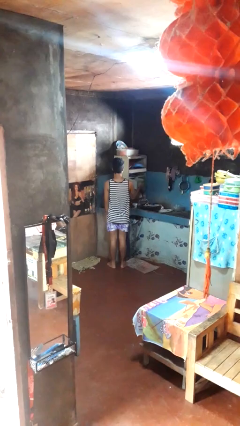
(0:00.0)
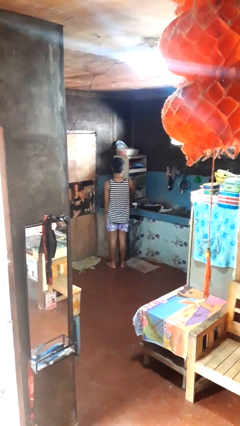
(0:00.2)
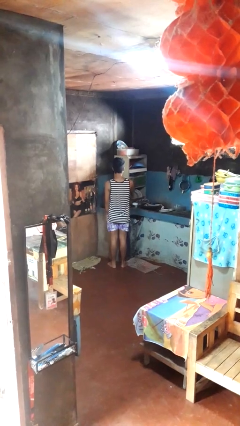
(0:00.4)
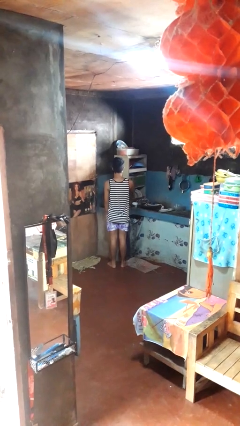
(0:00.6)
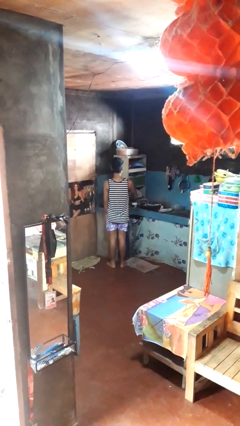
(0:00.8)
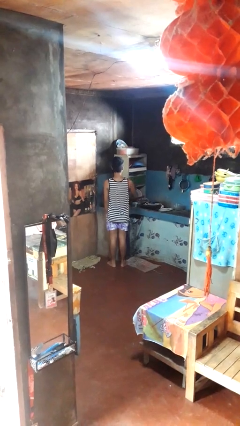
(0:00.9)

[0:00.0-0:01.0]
person closes kitchen drawer

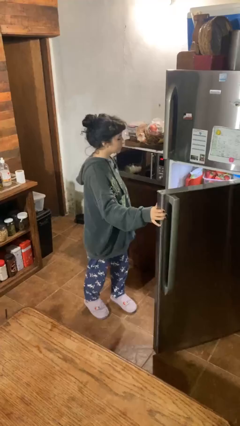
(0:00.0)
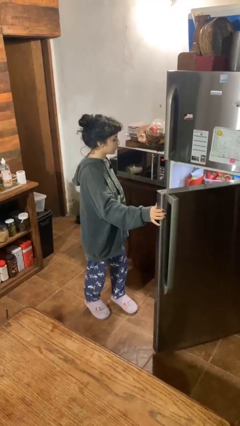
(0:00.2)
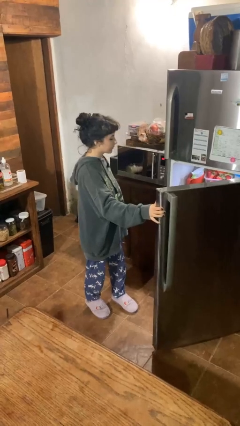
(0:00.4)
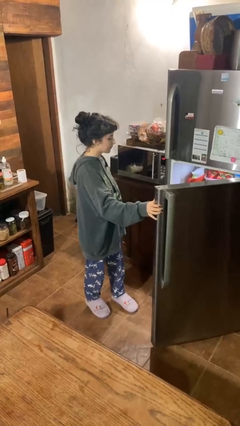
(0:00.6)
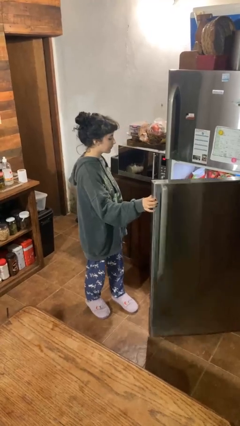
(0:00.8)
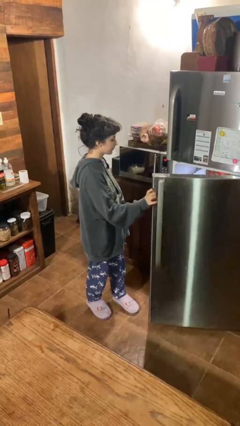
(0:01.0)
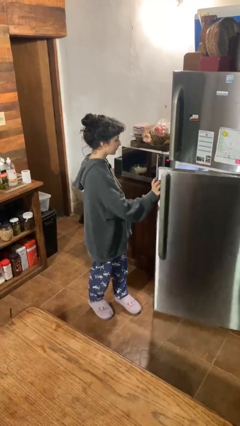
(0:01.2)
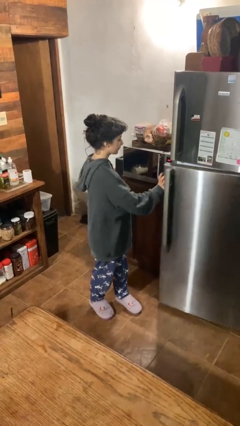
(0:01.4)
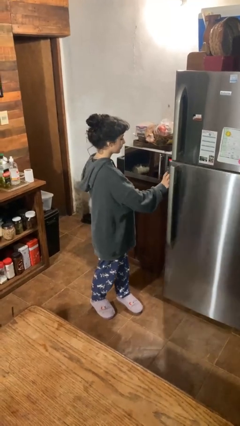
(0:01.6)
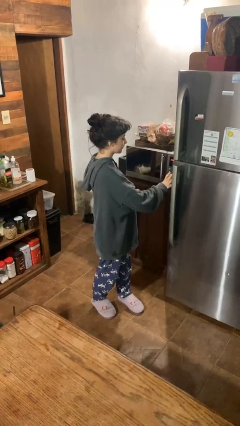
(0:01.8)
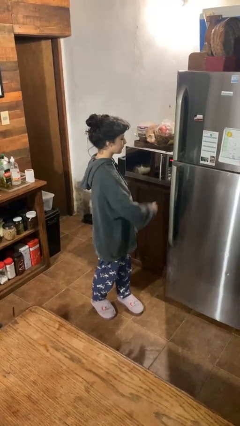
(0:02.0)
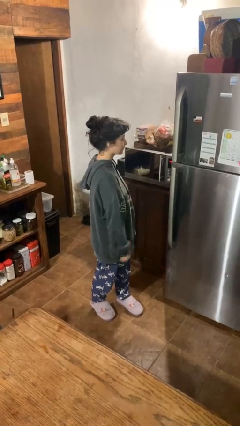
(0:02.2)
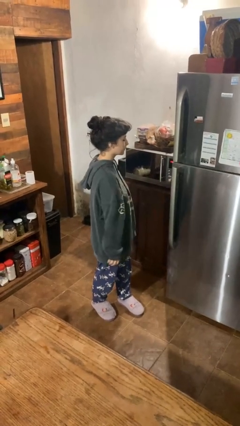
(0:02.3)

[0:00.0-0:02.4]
person closes refrigerator

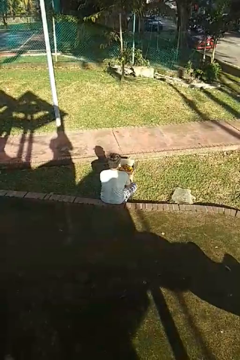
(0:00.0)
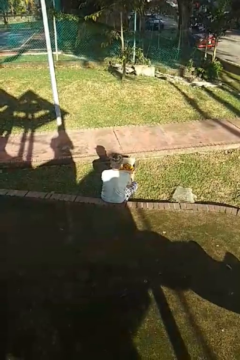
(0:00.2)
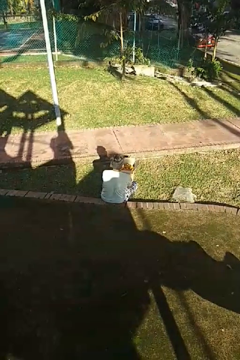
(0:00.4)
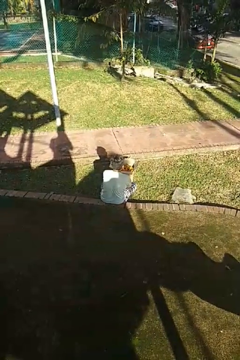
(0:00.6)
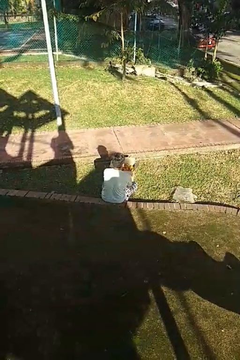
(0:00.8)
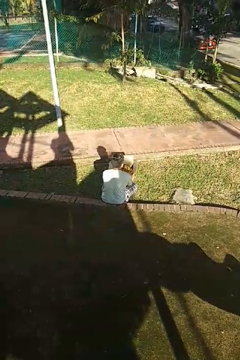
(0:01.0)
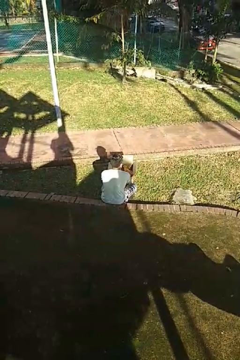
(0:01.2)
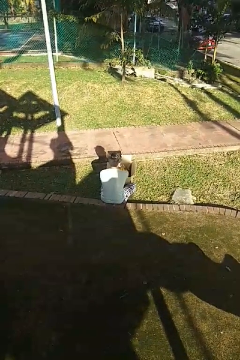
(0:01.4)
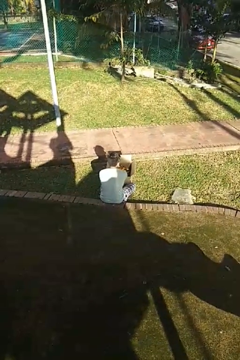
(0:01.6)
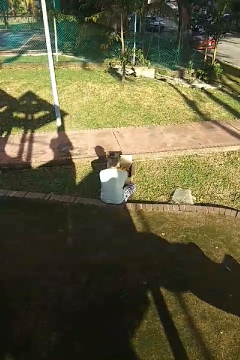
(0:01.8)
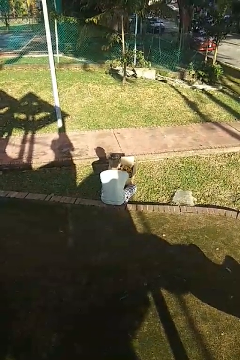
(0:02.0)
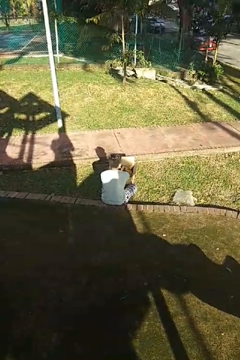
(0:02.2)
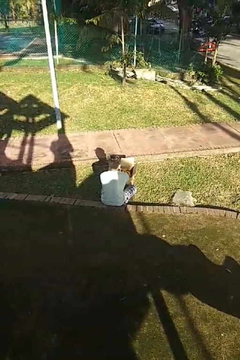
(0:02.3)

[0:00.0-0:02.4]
person searches in box

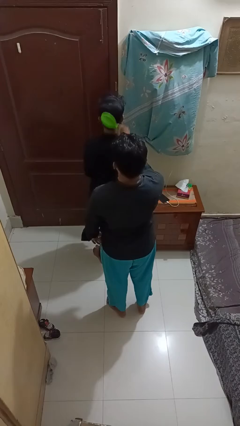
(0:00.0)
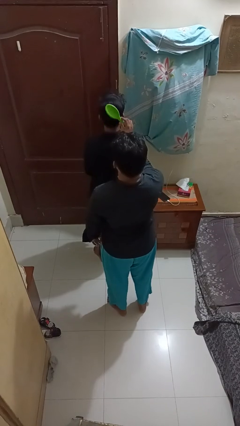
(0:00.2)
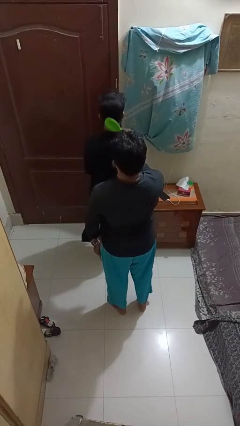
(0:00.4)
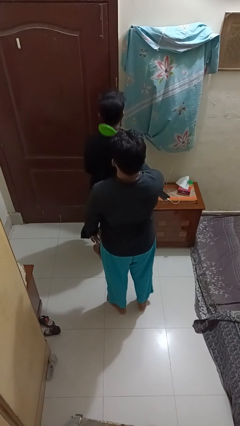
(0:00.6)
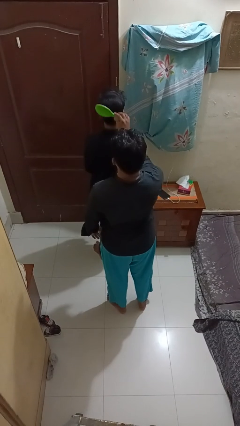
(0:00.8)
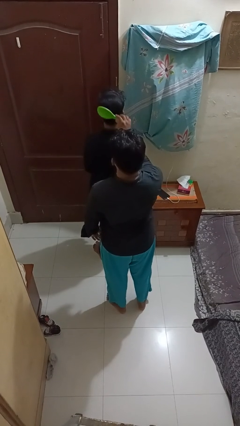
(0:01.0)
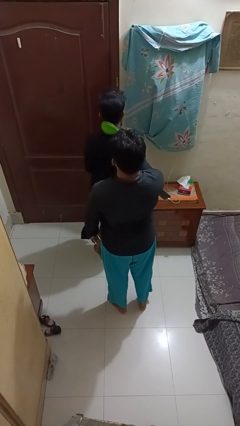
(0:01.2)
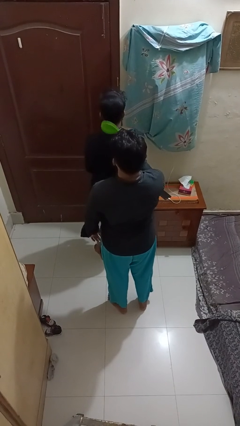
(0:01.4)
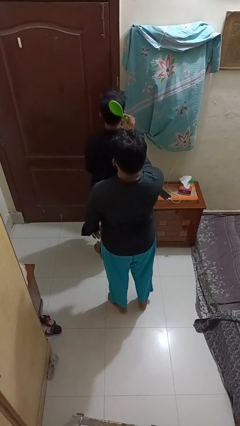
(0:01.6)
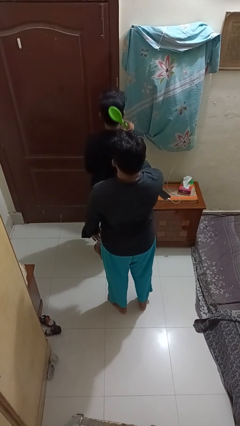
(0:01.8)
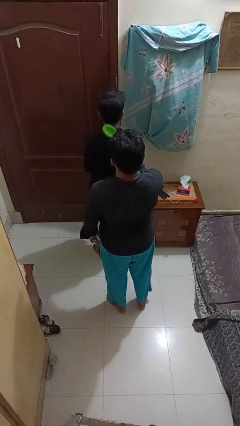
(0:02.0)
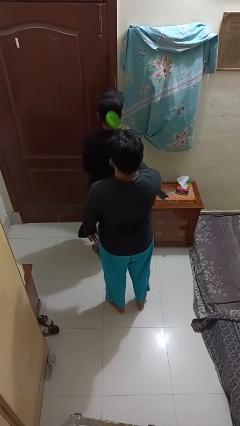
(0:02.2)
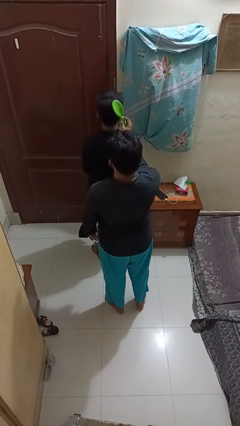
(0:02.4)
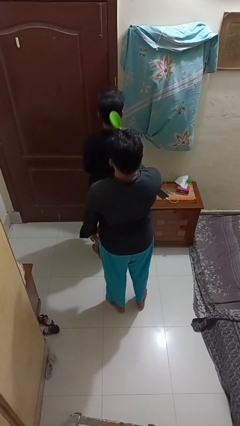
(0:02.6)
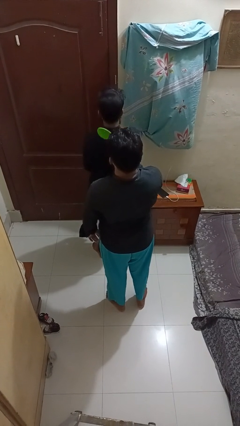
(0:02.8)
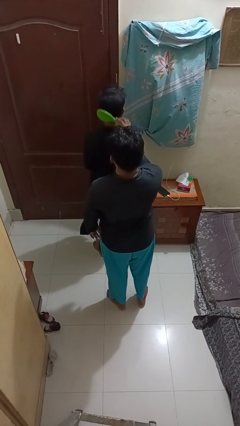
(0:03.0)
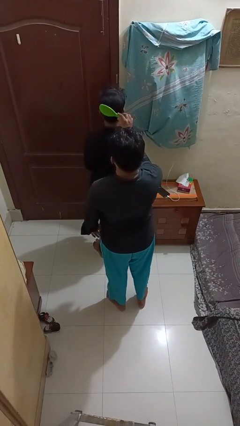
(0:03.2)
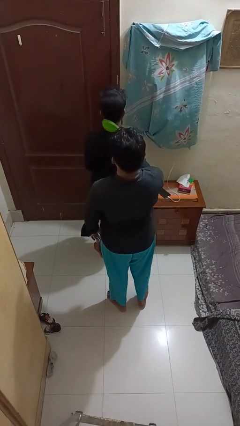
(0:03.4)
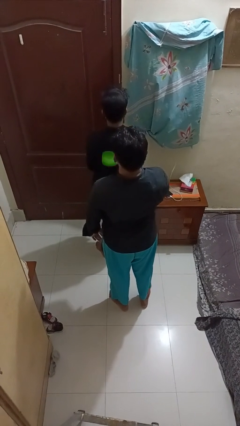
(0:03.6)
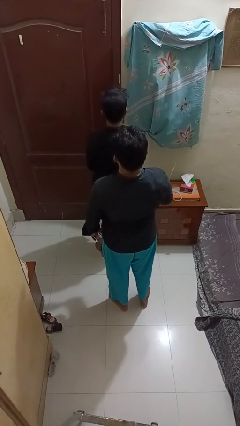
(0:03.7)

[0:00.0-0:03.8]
person brushes hair of person

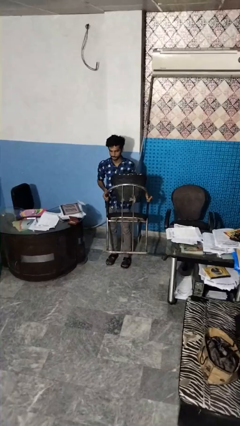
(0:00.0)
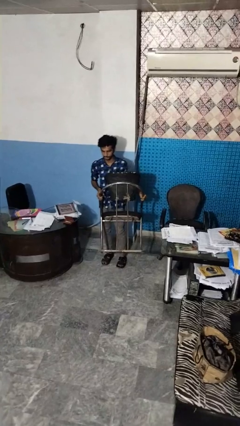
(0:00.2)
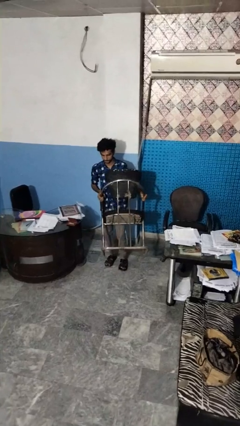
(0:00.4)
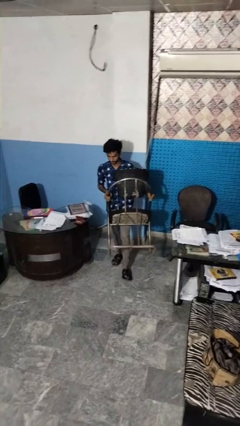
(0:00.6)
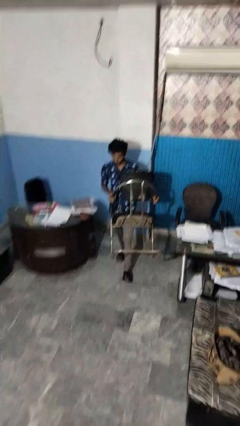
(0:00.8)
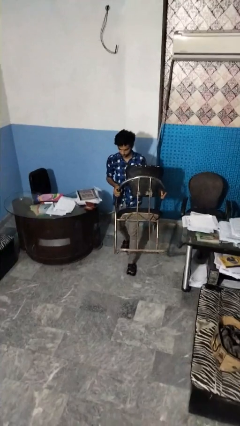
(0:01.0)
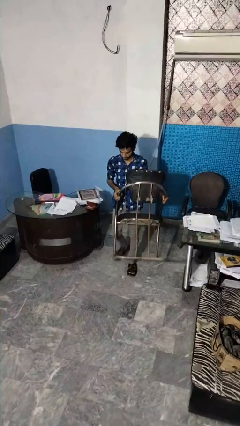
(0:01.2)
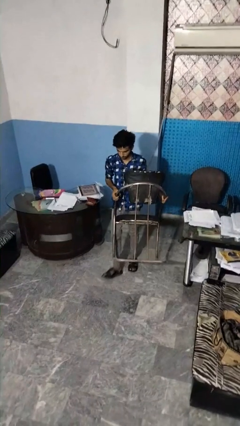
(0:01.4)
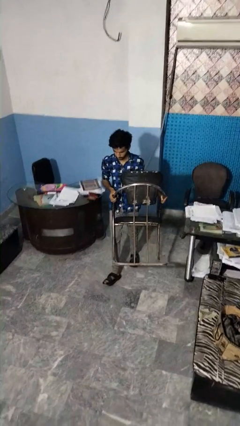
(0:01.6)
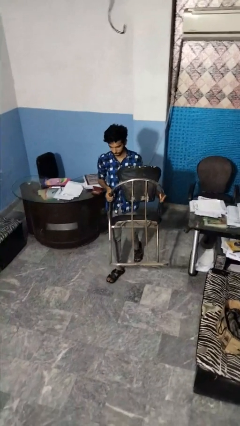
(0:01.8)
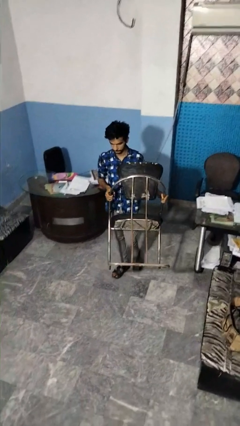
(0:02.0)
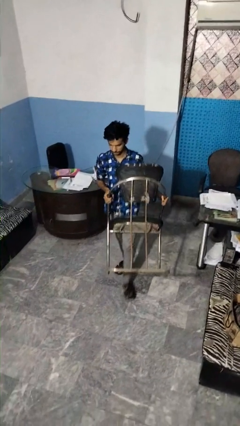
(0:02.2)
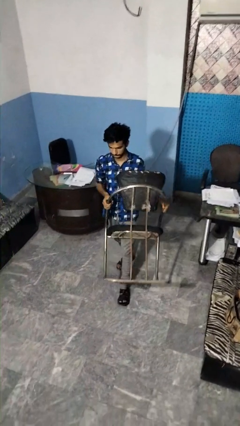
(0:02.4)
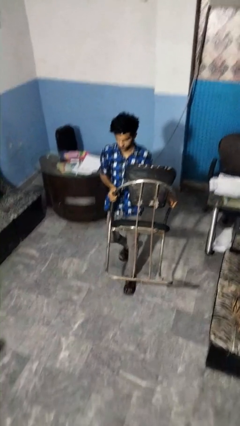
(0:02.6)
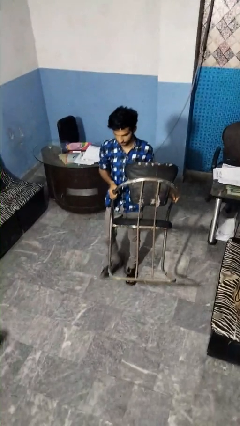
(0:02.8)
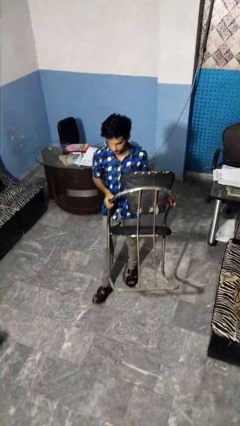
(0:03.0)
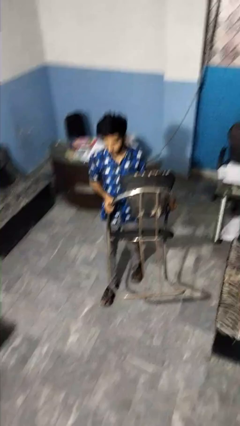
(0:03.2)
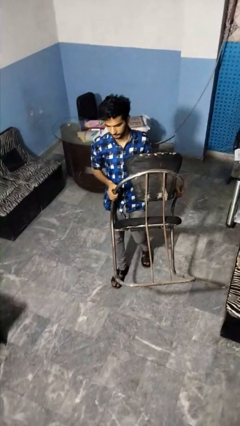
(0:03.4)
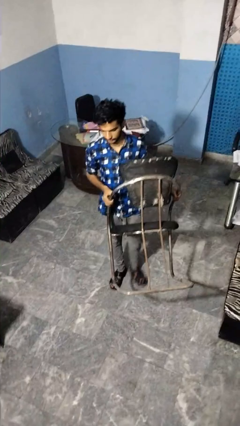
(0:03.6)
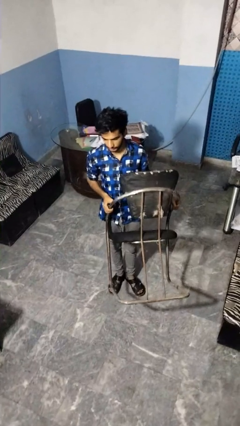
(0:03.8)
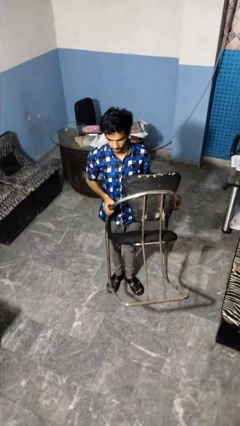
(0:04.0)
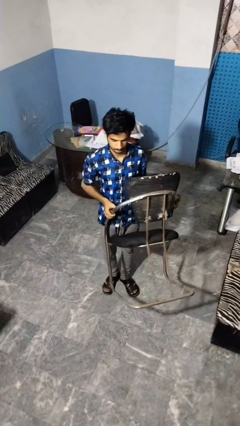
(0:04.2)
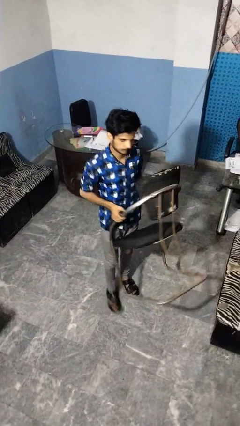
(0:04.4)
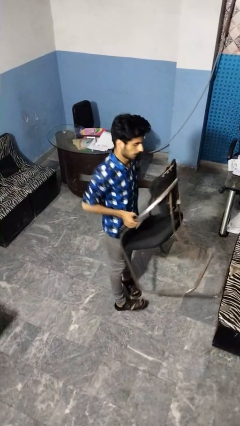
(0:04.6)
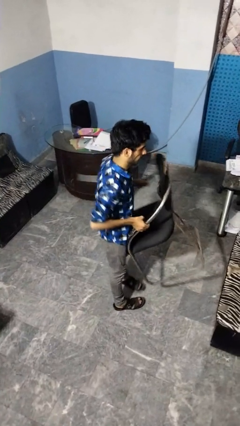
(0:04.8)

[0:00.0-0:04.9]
person carries furniture

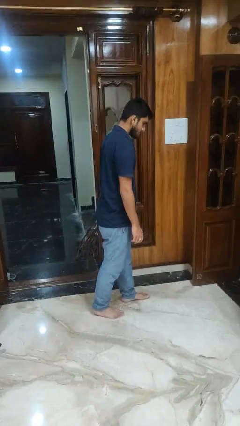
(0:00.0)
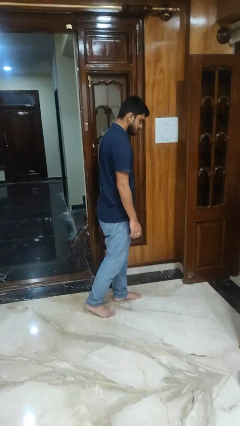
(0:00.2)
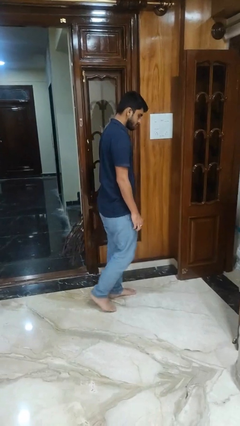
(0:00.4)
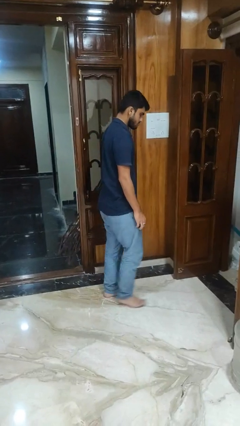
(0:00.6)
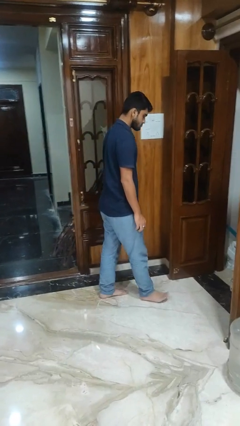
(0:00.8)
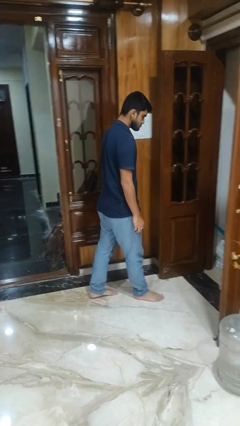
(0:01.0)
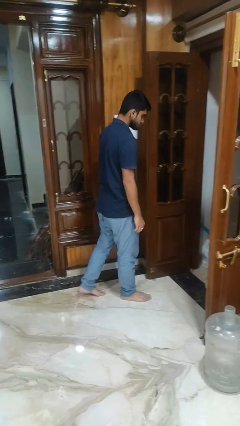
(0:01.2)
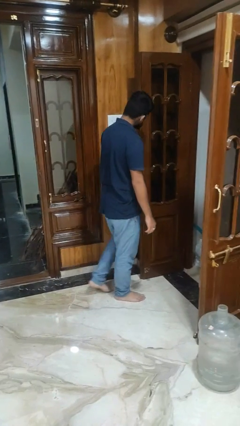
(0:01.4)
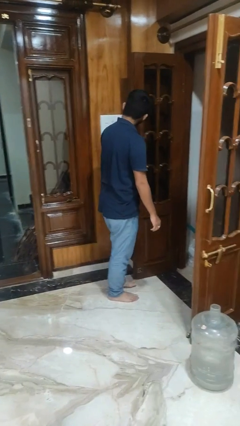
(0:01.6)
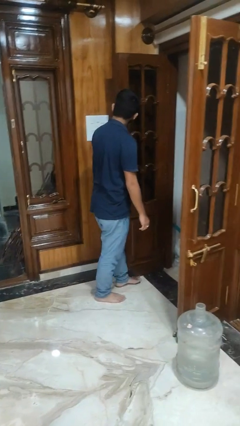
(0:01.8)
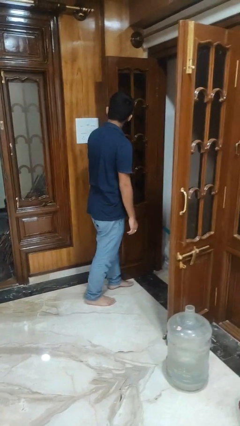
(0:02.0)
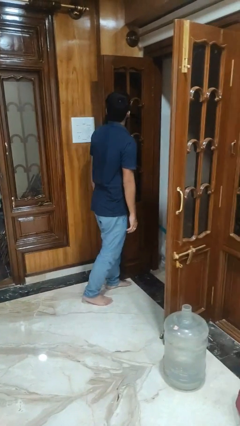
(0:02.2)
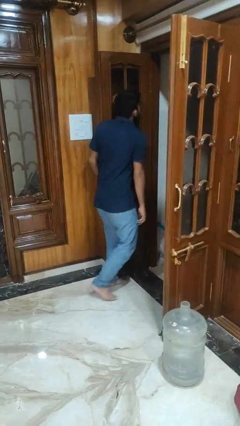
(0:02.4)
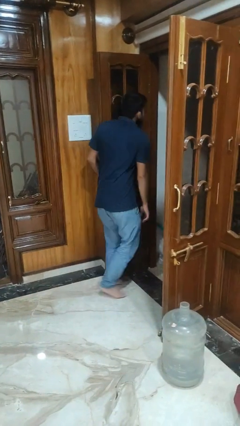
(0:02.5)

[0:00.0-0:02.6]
person bumps into wall

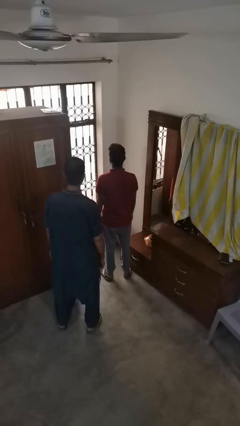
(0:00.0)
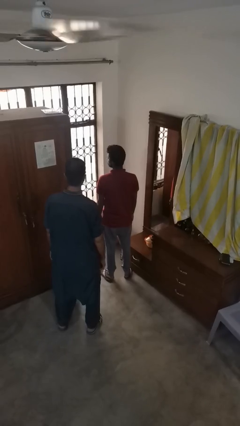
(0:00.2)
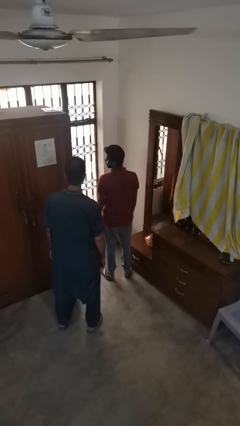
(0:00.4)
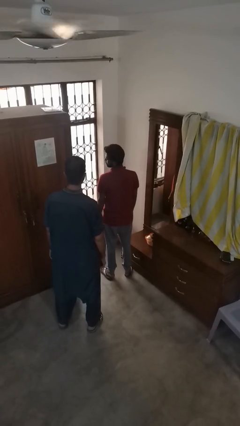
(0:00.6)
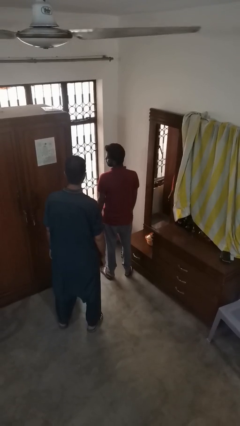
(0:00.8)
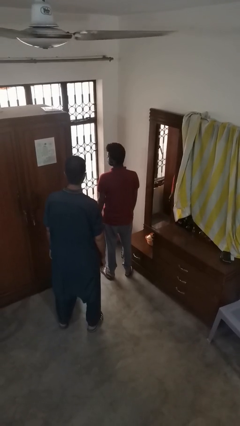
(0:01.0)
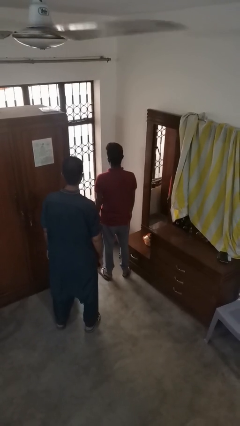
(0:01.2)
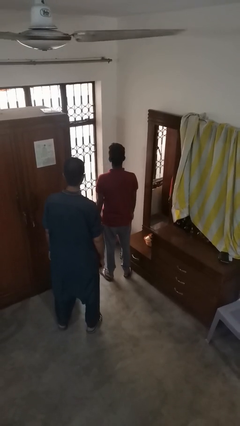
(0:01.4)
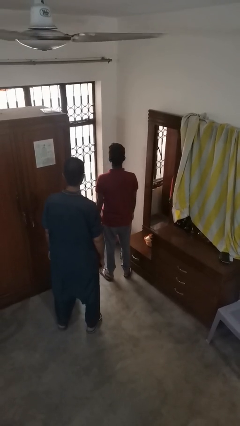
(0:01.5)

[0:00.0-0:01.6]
person looks over shoulder
